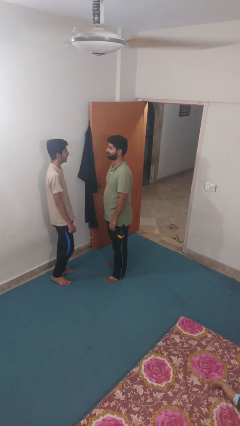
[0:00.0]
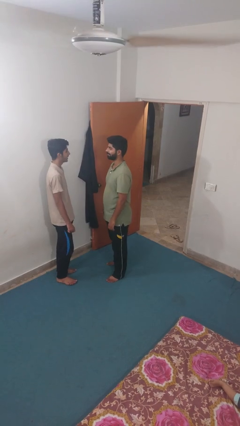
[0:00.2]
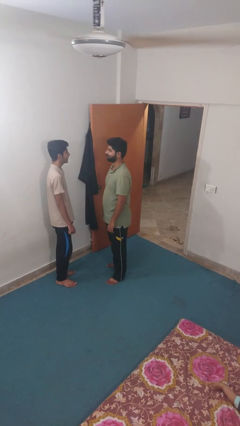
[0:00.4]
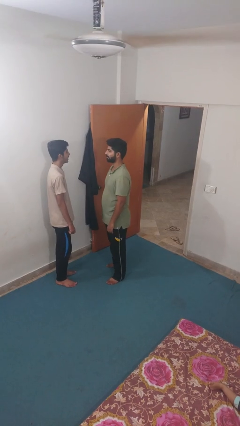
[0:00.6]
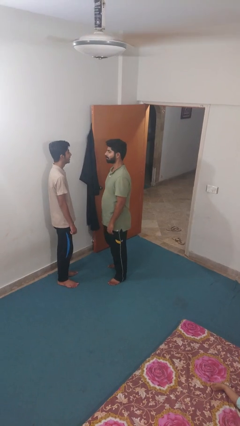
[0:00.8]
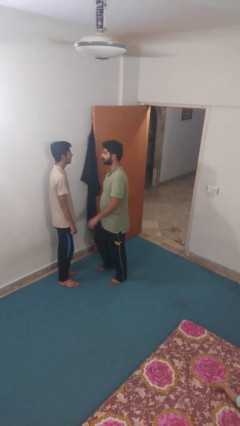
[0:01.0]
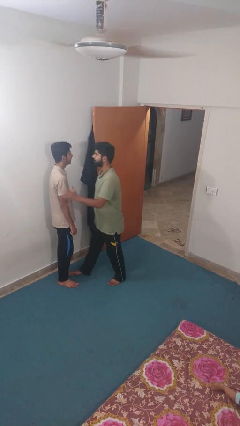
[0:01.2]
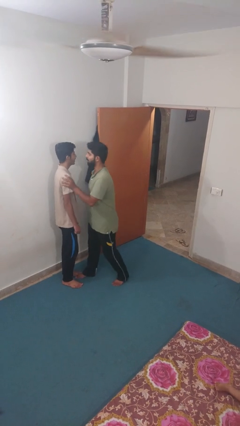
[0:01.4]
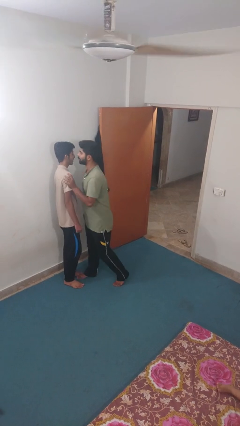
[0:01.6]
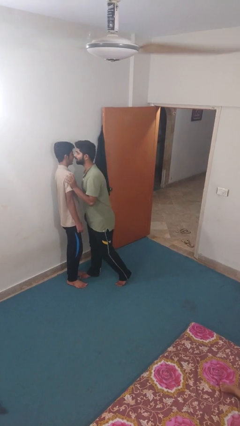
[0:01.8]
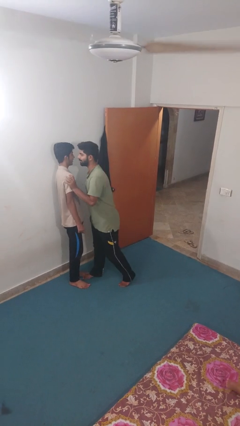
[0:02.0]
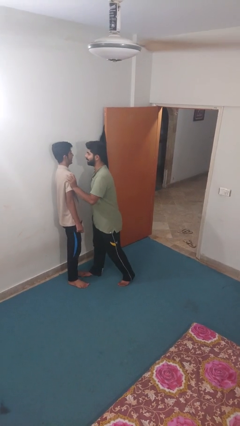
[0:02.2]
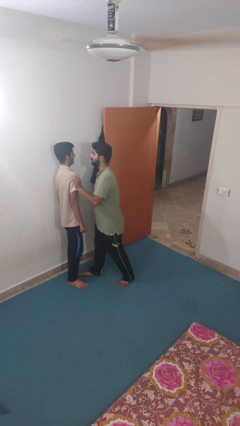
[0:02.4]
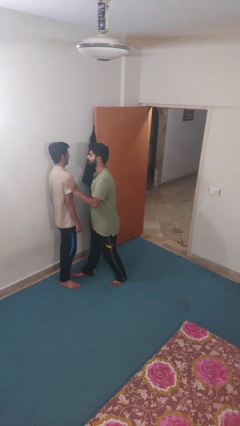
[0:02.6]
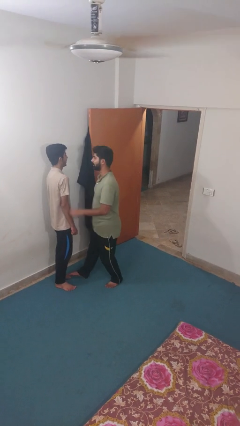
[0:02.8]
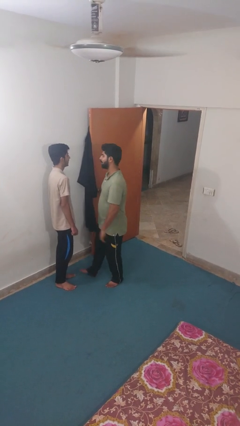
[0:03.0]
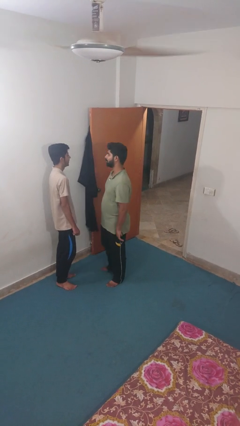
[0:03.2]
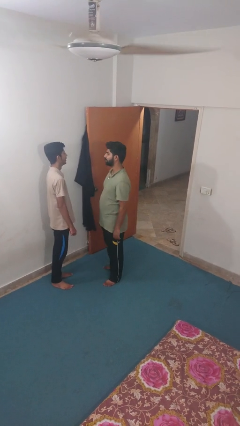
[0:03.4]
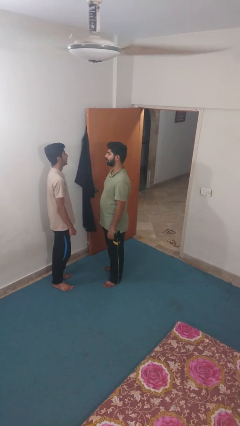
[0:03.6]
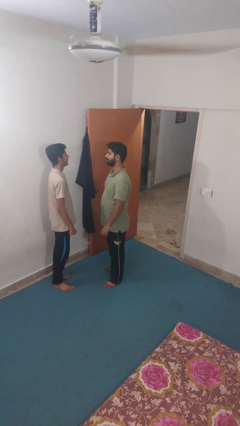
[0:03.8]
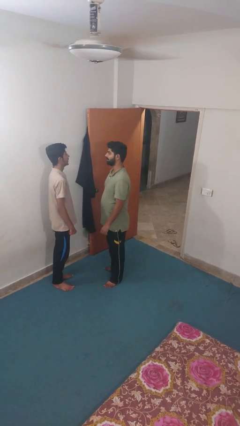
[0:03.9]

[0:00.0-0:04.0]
person kisses cheek of person

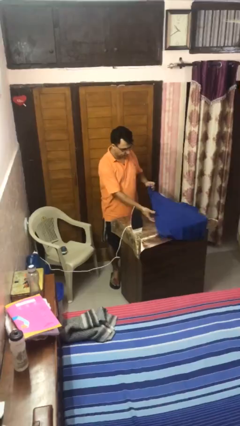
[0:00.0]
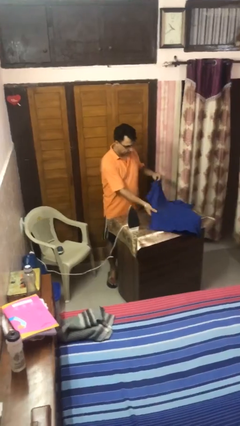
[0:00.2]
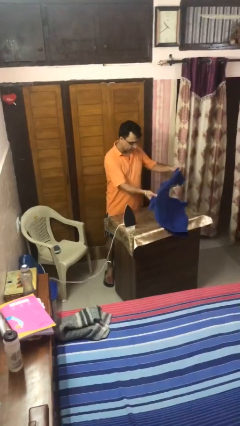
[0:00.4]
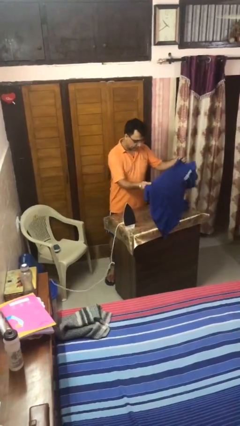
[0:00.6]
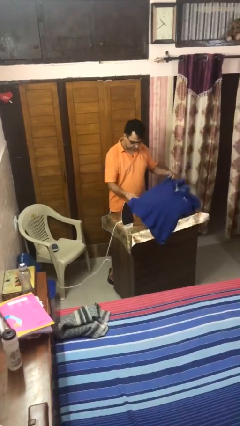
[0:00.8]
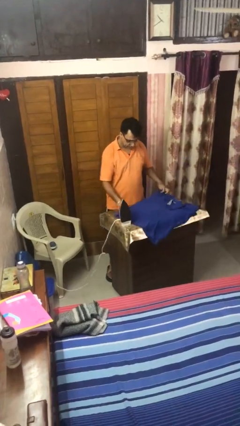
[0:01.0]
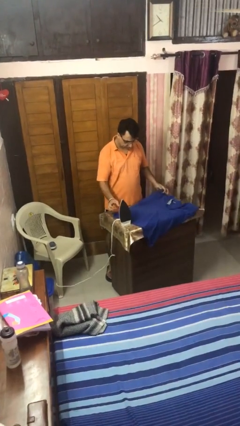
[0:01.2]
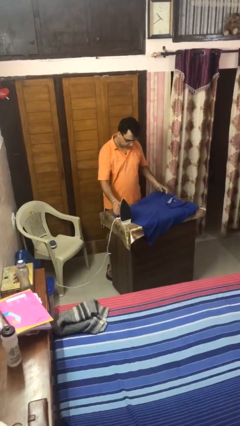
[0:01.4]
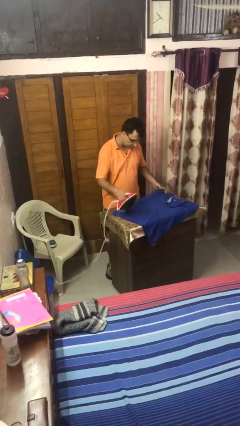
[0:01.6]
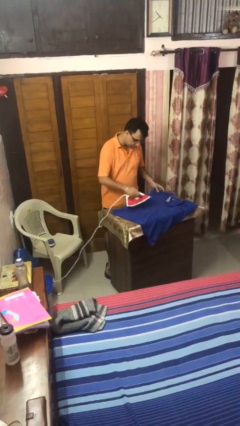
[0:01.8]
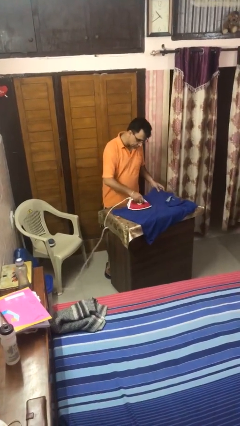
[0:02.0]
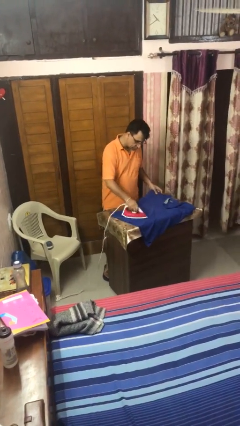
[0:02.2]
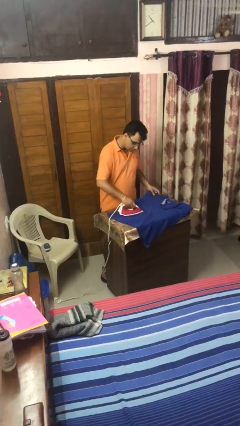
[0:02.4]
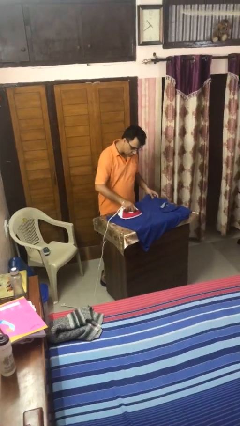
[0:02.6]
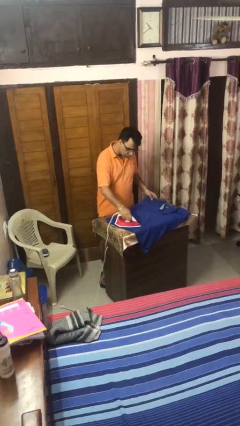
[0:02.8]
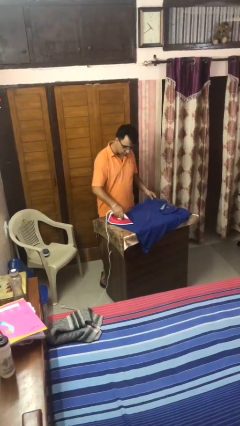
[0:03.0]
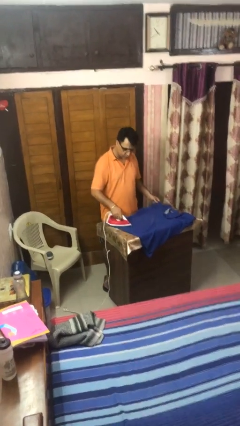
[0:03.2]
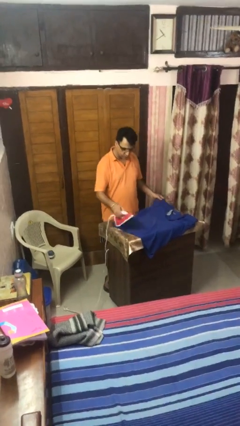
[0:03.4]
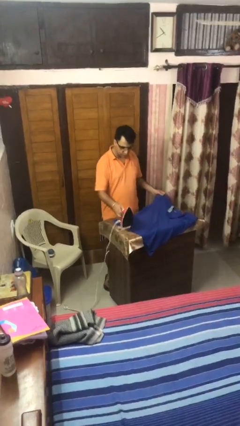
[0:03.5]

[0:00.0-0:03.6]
person irons clothes

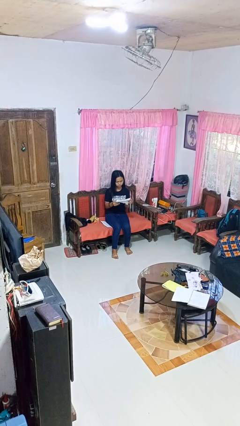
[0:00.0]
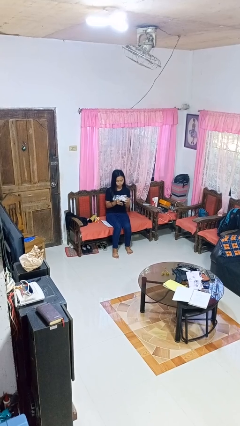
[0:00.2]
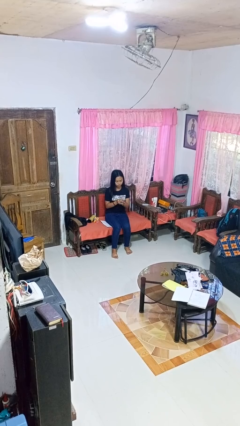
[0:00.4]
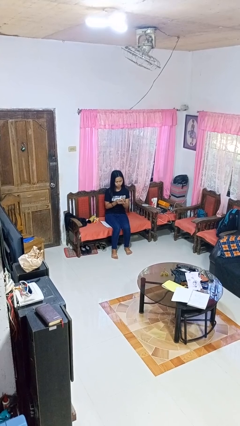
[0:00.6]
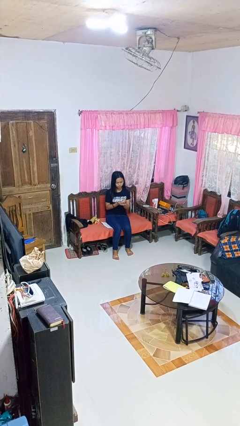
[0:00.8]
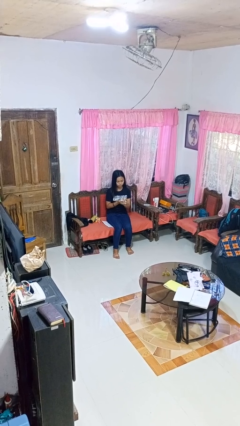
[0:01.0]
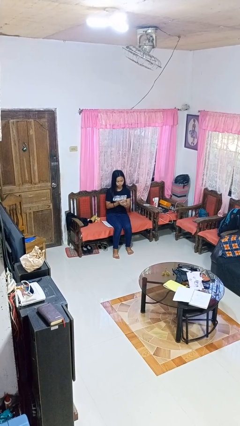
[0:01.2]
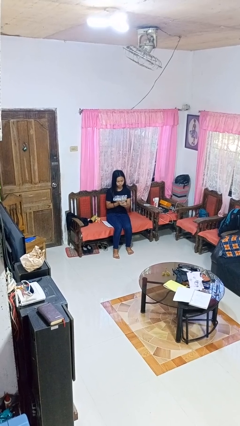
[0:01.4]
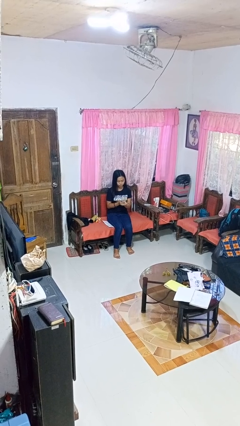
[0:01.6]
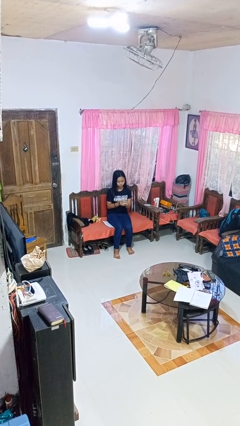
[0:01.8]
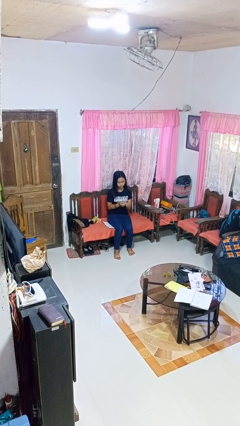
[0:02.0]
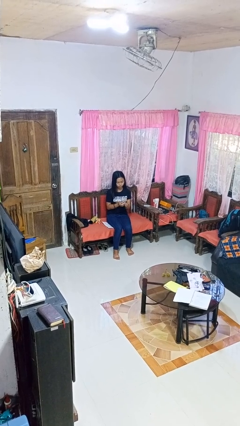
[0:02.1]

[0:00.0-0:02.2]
person crumples paper

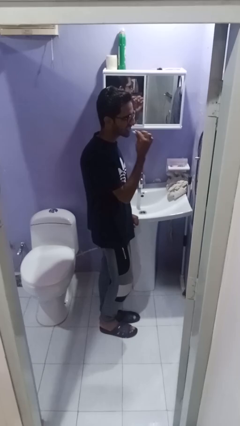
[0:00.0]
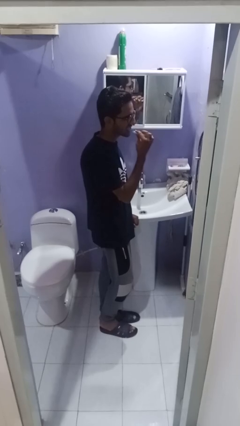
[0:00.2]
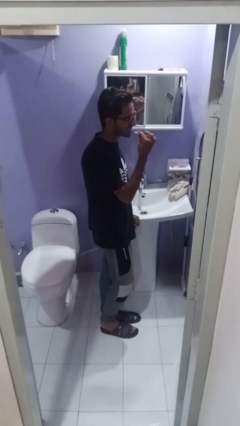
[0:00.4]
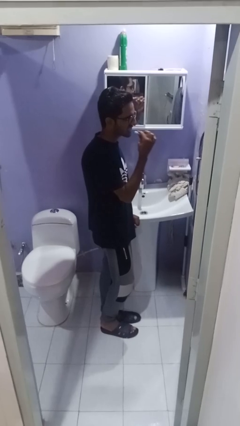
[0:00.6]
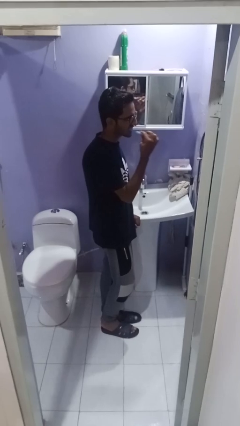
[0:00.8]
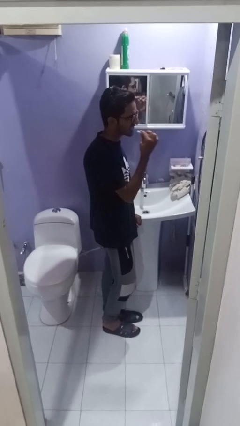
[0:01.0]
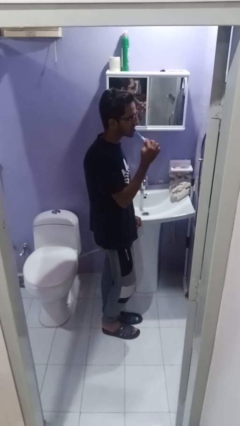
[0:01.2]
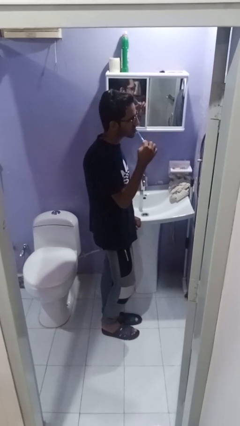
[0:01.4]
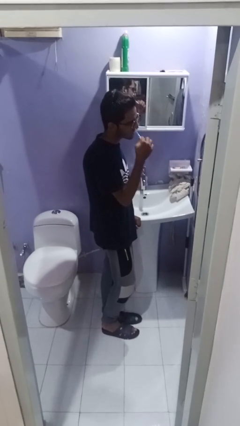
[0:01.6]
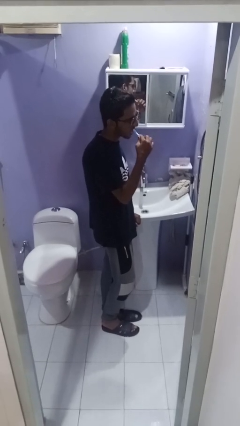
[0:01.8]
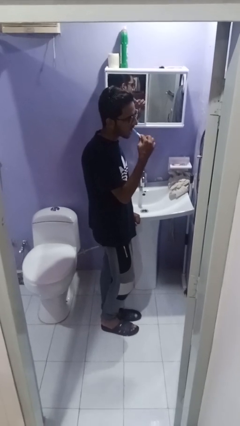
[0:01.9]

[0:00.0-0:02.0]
person brushes teeth

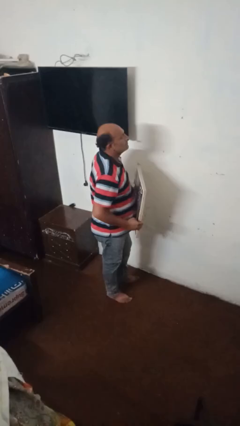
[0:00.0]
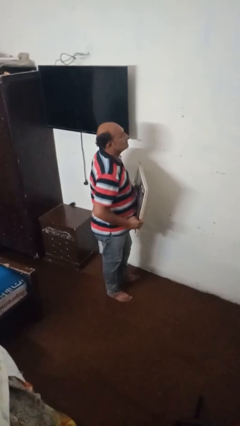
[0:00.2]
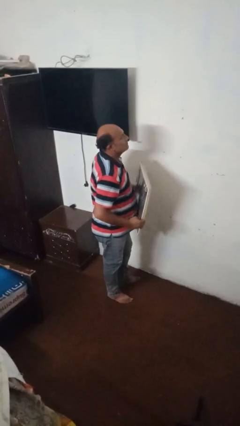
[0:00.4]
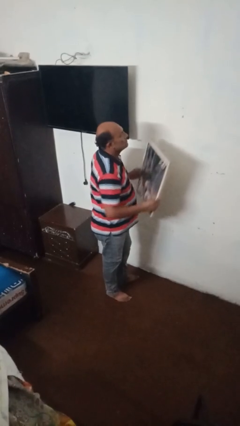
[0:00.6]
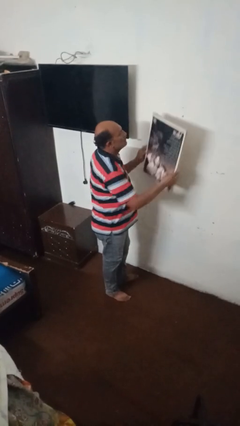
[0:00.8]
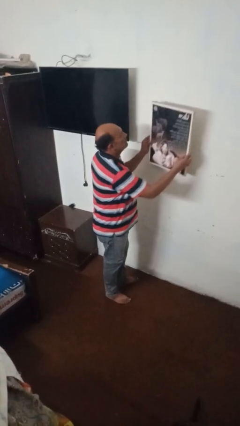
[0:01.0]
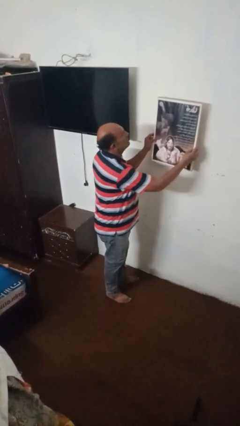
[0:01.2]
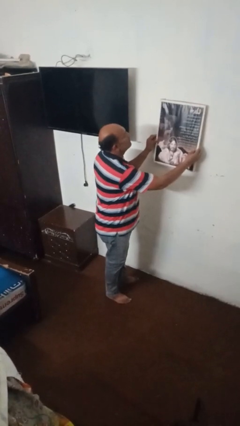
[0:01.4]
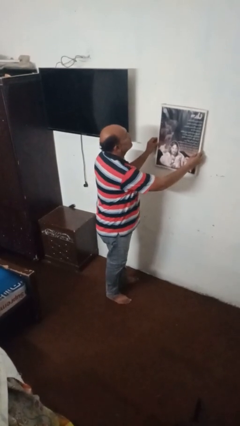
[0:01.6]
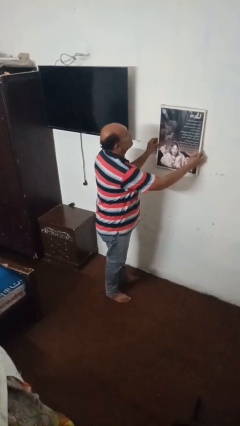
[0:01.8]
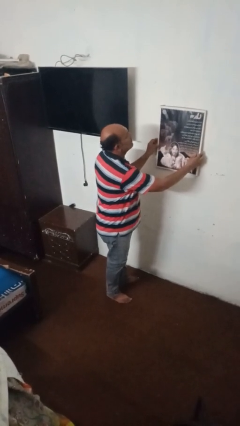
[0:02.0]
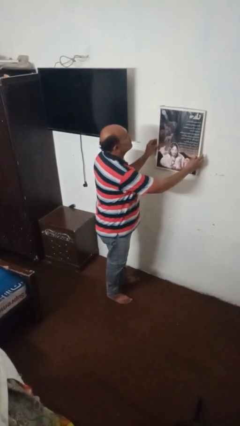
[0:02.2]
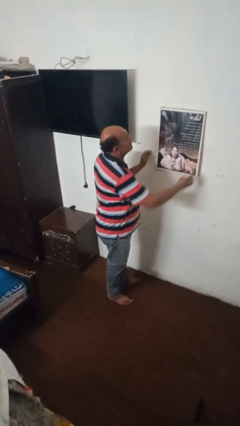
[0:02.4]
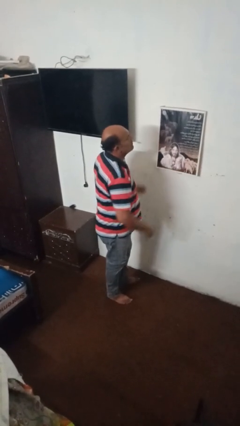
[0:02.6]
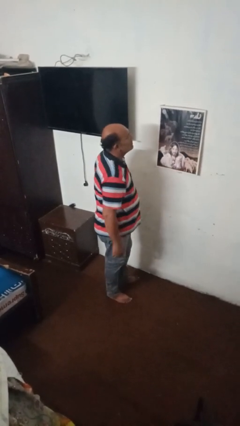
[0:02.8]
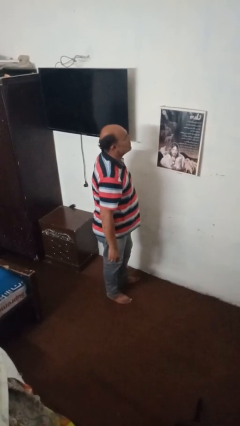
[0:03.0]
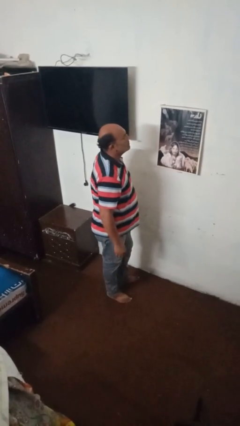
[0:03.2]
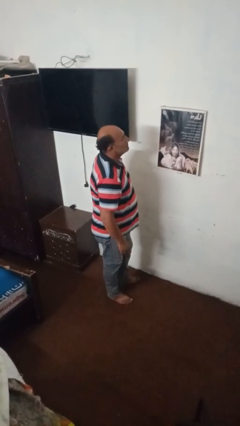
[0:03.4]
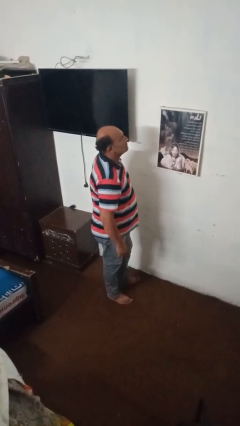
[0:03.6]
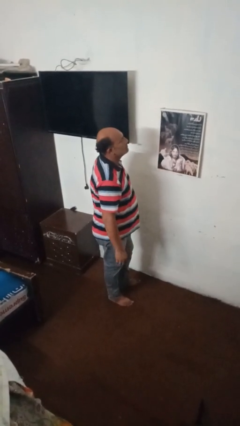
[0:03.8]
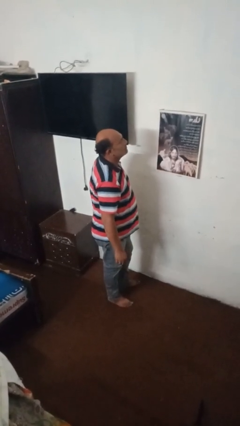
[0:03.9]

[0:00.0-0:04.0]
person puts up picture frame

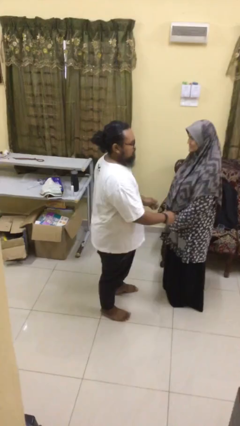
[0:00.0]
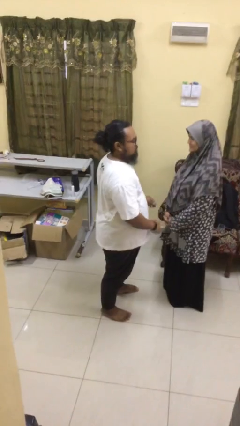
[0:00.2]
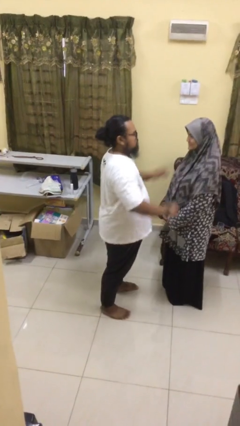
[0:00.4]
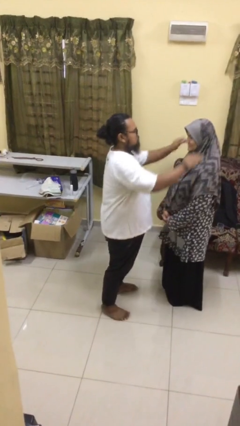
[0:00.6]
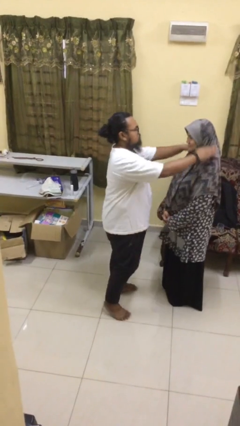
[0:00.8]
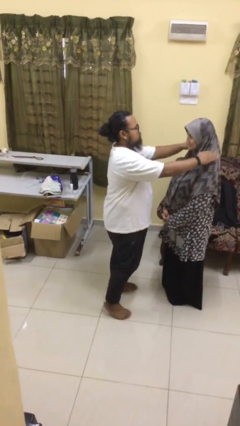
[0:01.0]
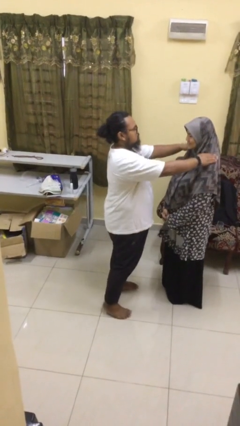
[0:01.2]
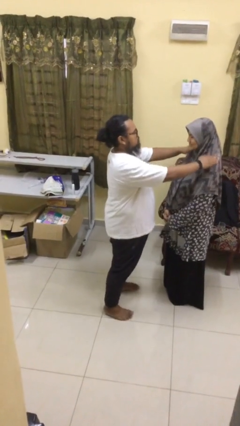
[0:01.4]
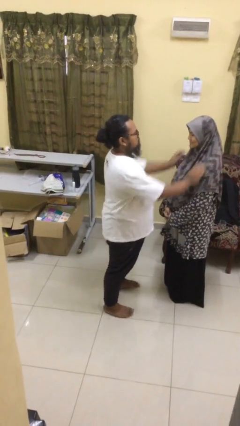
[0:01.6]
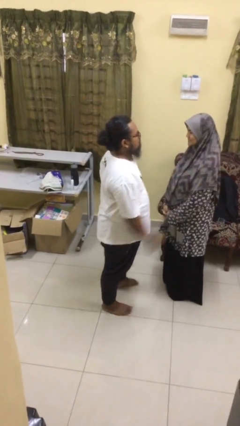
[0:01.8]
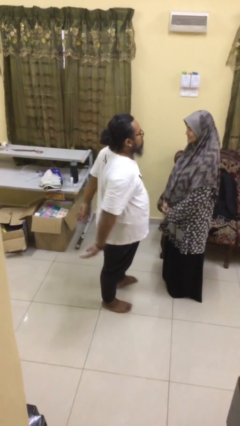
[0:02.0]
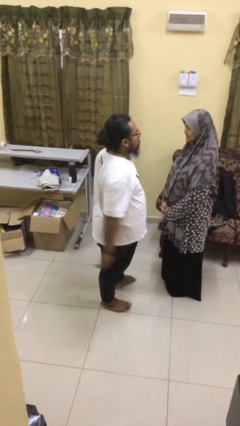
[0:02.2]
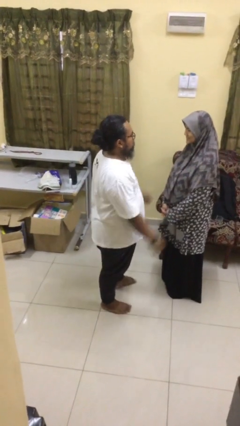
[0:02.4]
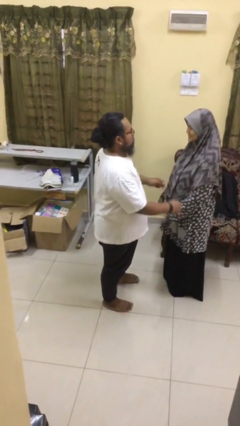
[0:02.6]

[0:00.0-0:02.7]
person pounds shoulders of person
